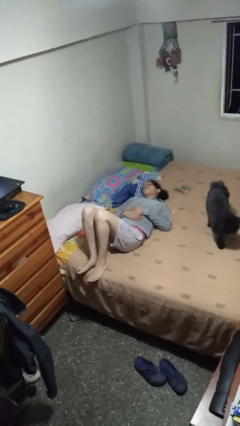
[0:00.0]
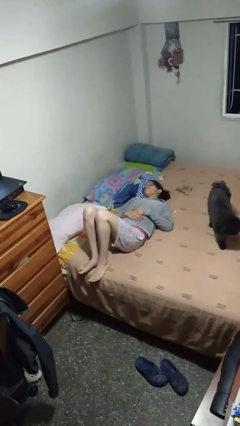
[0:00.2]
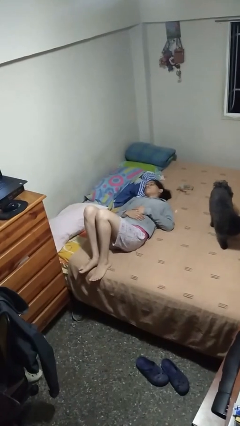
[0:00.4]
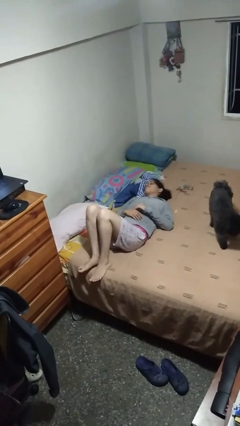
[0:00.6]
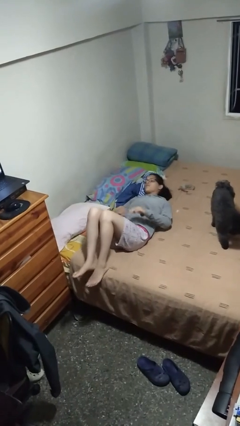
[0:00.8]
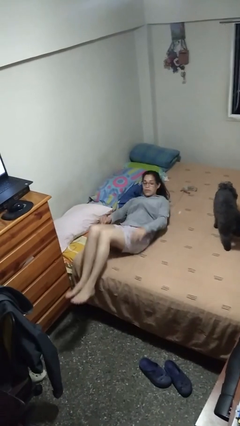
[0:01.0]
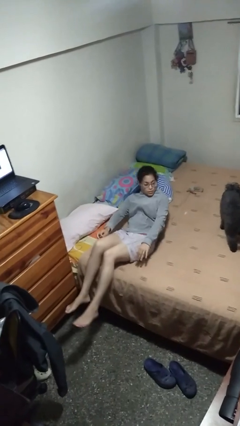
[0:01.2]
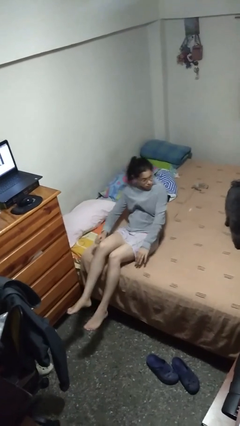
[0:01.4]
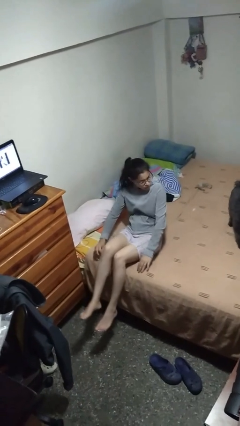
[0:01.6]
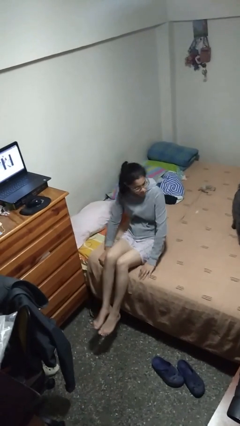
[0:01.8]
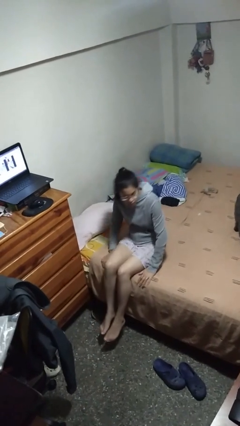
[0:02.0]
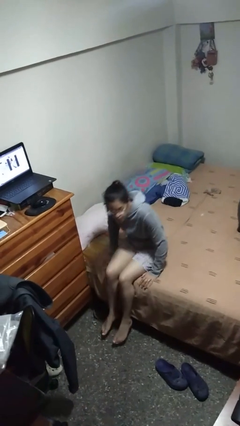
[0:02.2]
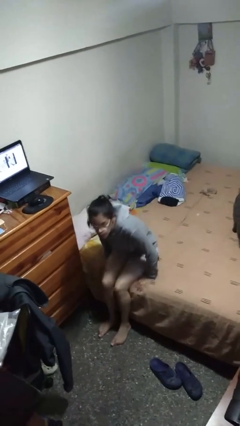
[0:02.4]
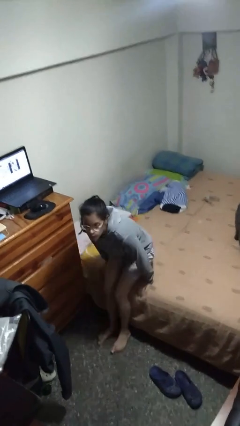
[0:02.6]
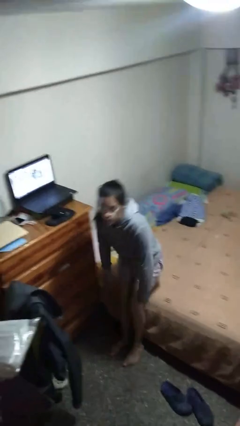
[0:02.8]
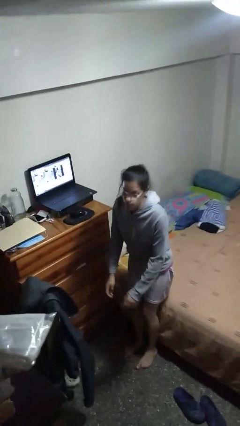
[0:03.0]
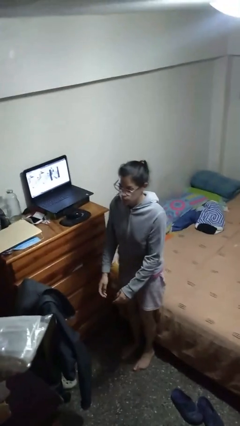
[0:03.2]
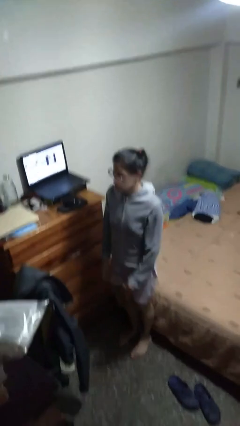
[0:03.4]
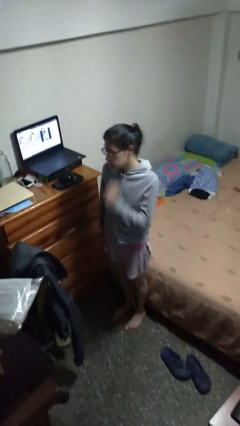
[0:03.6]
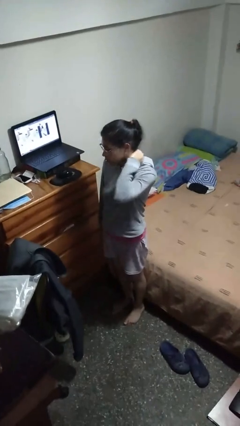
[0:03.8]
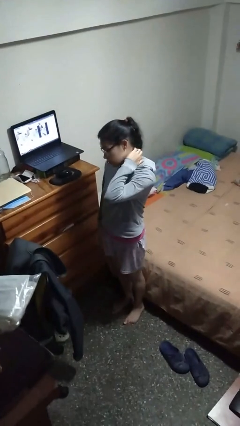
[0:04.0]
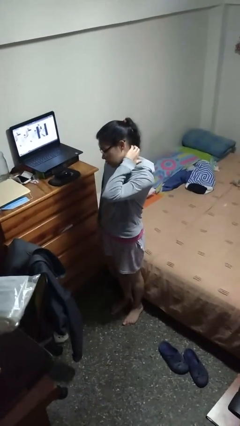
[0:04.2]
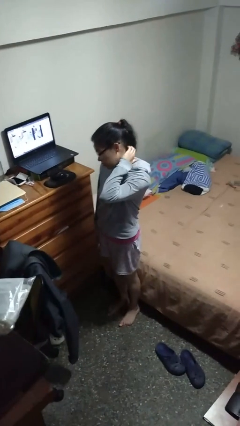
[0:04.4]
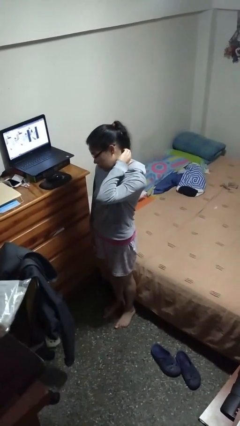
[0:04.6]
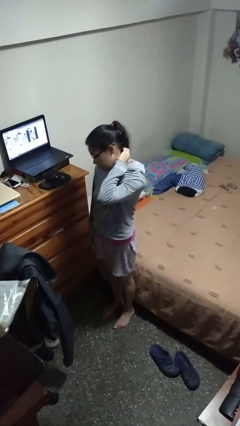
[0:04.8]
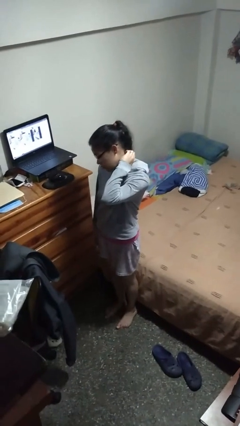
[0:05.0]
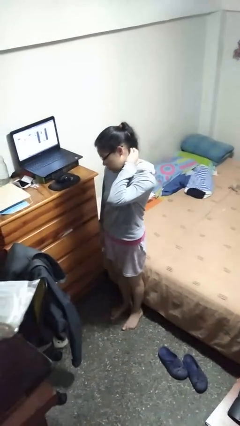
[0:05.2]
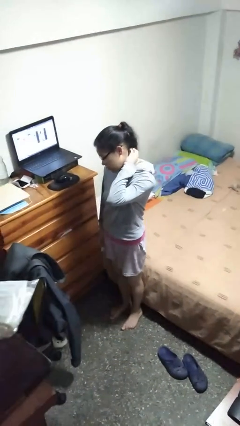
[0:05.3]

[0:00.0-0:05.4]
person stands up

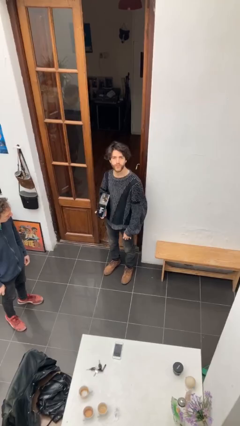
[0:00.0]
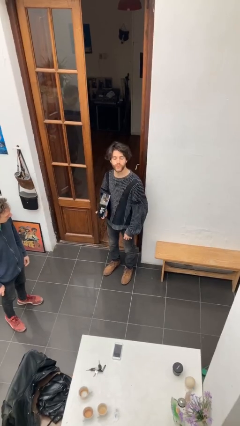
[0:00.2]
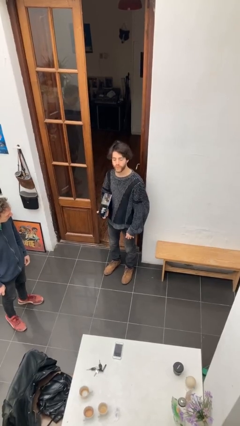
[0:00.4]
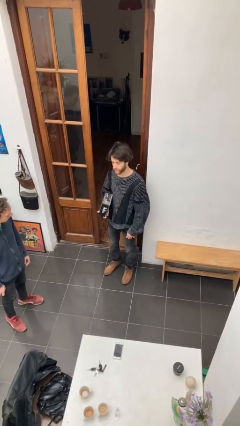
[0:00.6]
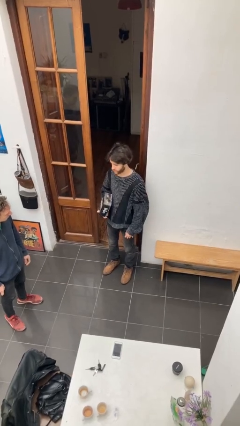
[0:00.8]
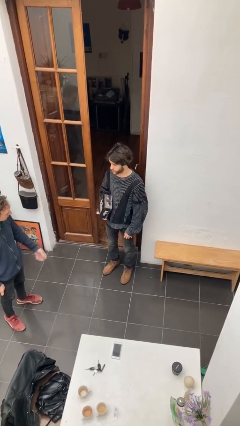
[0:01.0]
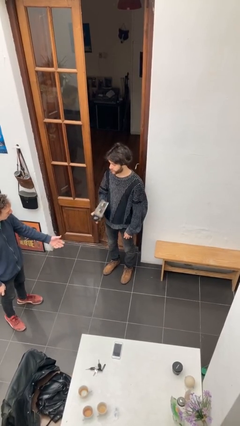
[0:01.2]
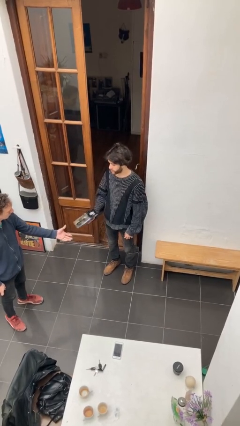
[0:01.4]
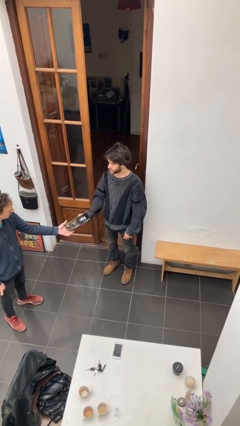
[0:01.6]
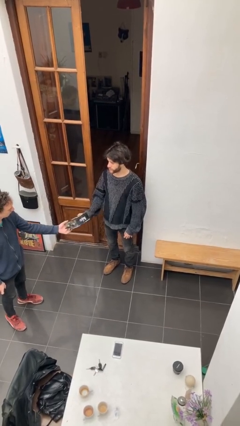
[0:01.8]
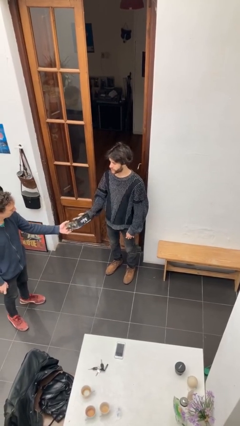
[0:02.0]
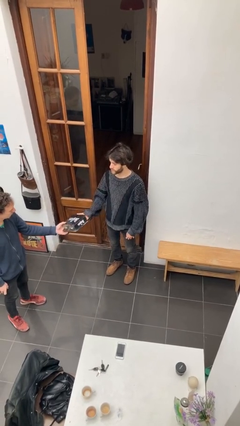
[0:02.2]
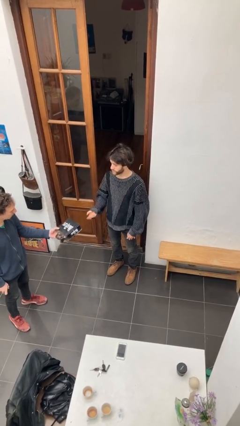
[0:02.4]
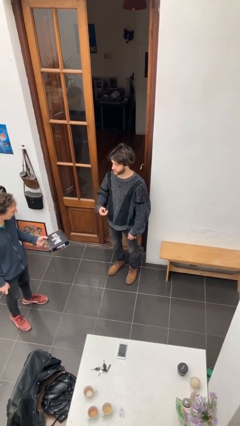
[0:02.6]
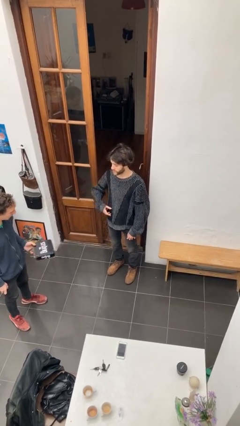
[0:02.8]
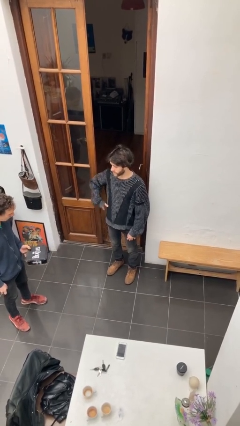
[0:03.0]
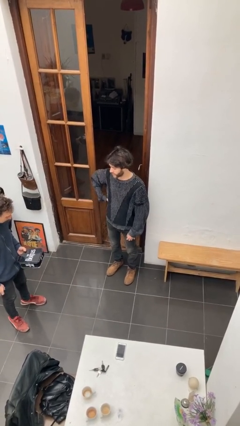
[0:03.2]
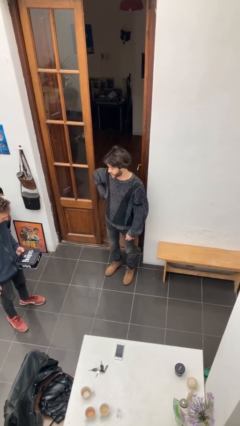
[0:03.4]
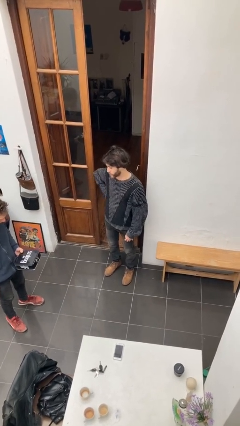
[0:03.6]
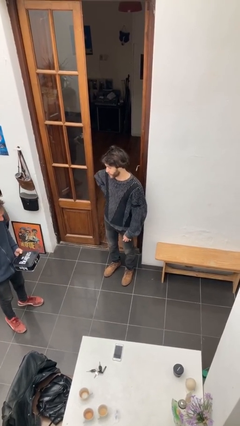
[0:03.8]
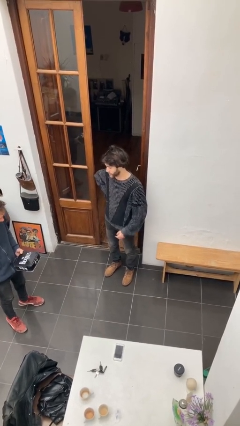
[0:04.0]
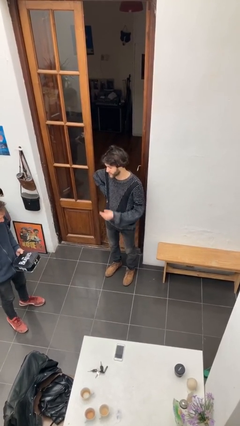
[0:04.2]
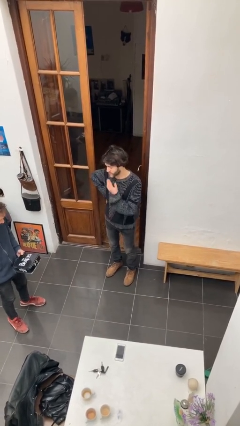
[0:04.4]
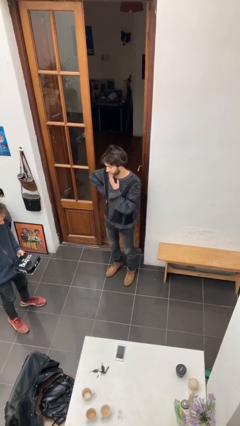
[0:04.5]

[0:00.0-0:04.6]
person transfers object to person

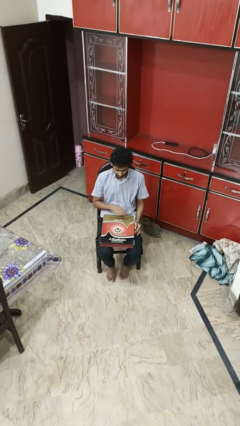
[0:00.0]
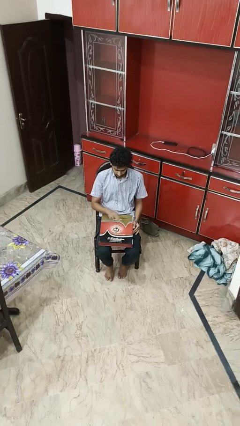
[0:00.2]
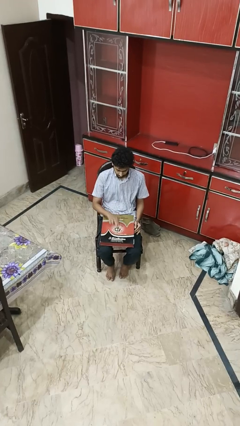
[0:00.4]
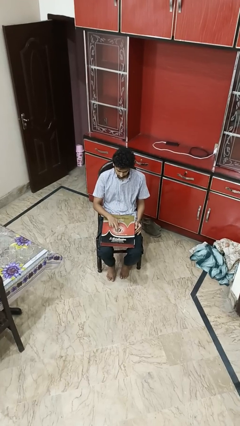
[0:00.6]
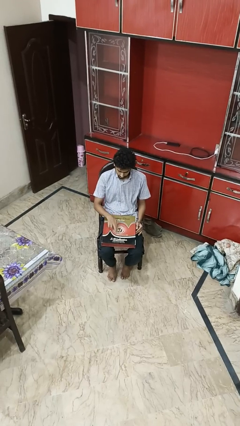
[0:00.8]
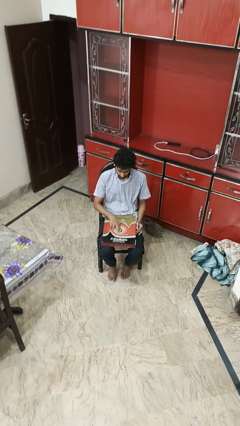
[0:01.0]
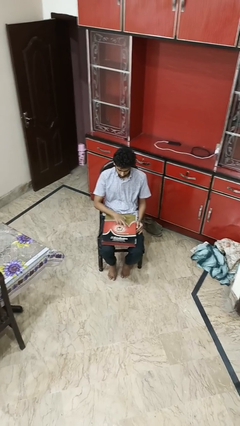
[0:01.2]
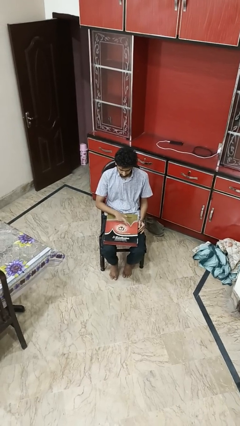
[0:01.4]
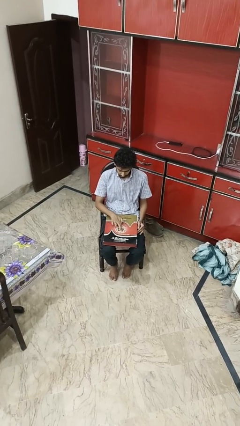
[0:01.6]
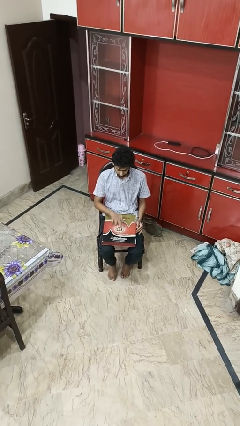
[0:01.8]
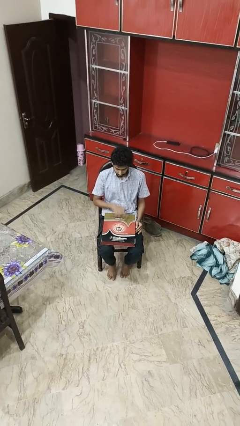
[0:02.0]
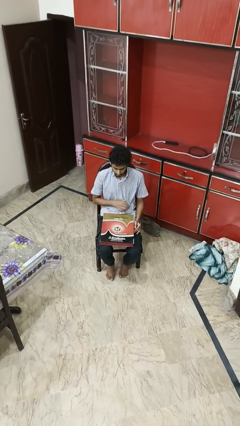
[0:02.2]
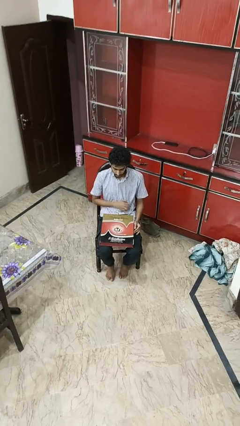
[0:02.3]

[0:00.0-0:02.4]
person taps object with finger

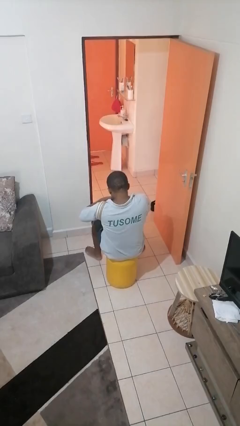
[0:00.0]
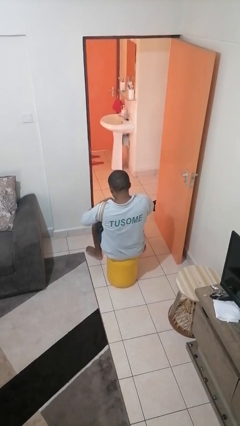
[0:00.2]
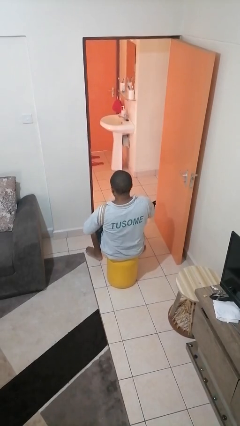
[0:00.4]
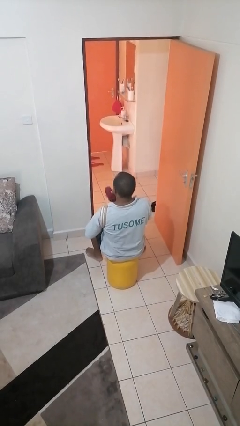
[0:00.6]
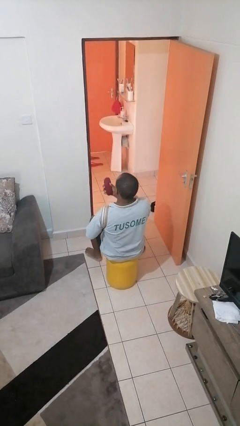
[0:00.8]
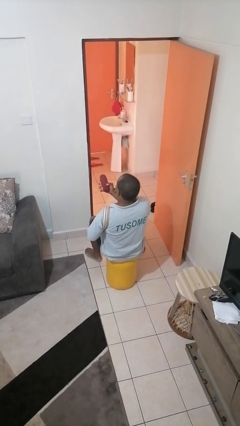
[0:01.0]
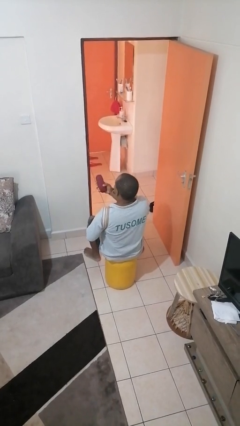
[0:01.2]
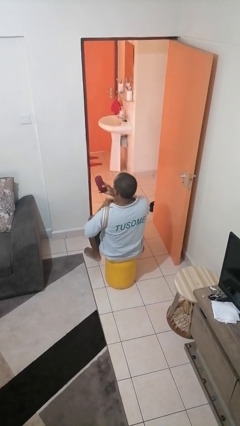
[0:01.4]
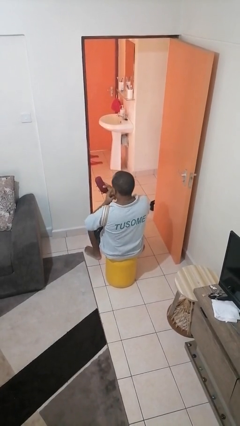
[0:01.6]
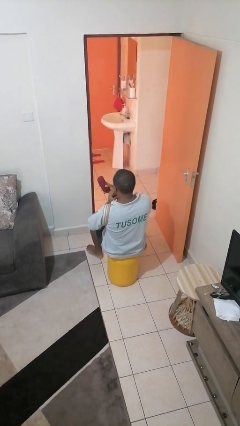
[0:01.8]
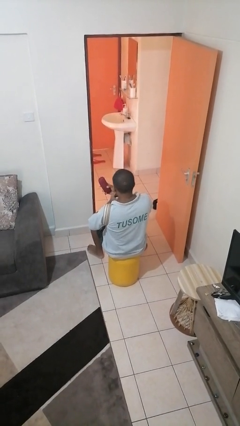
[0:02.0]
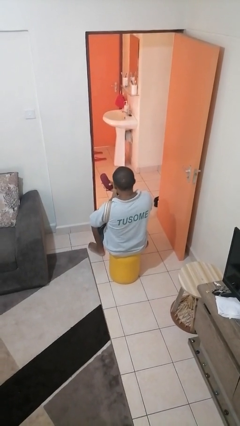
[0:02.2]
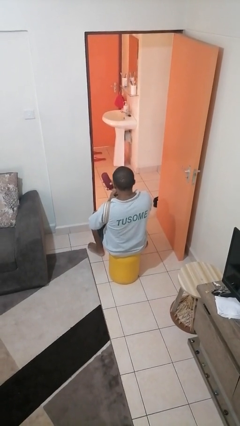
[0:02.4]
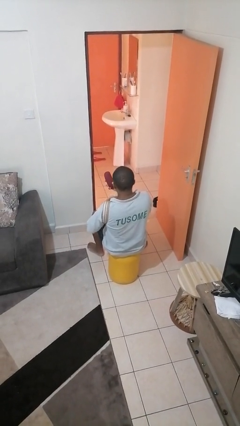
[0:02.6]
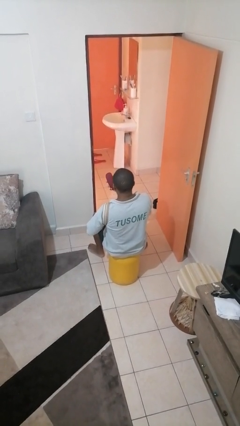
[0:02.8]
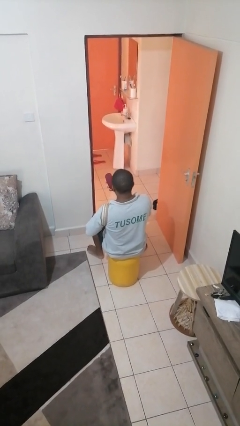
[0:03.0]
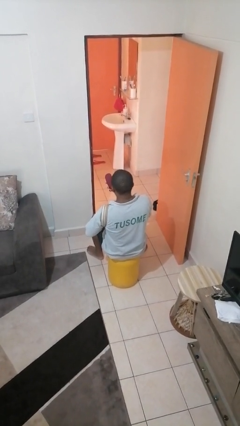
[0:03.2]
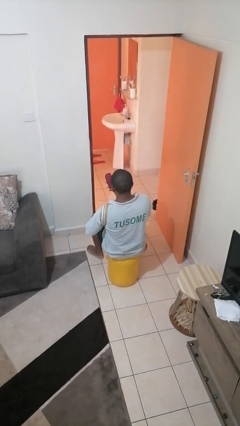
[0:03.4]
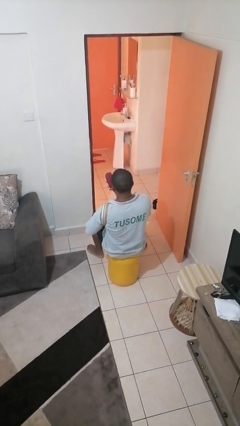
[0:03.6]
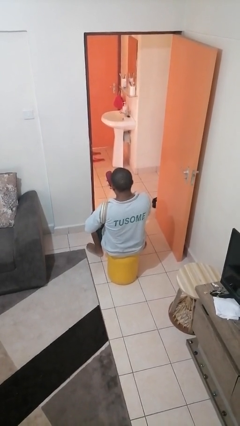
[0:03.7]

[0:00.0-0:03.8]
person takes object from purse

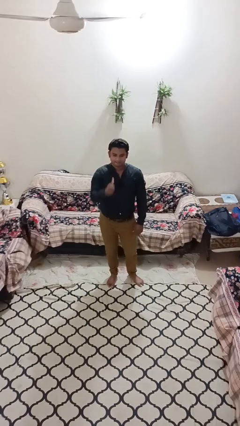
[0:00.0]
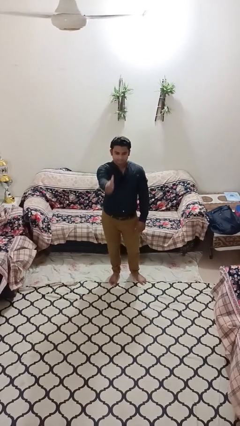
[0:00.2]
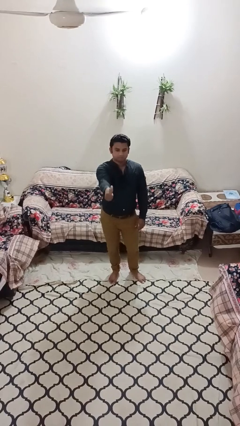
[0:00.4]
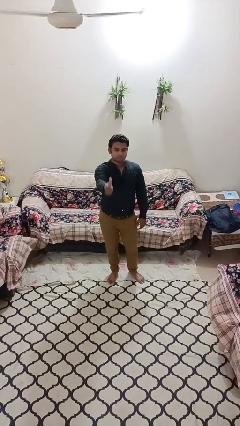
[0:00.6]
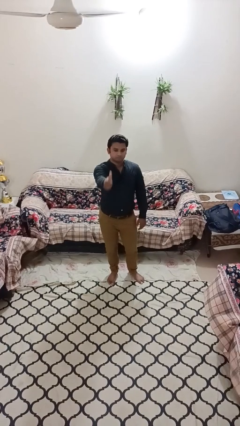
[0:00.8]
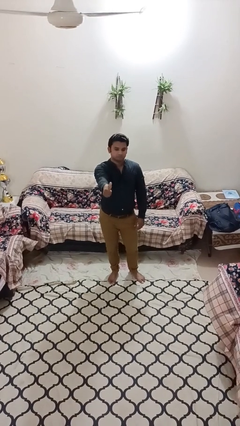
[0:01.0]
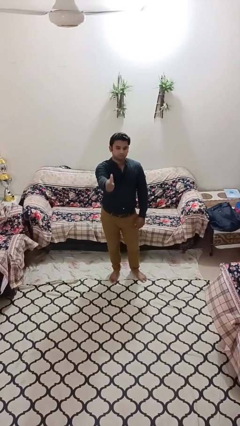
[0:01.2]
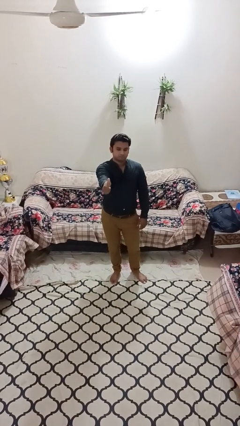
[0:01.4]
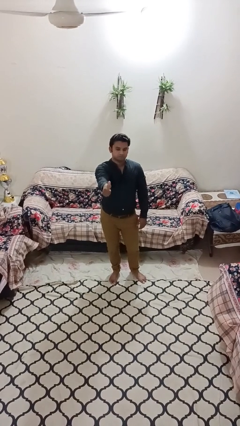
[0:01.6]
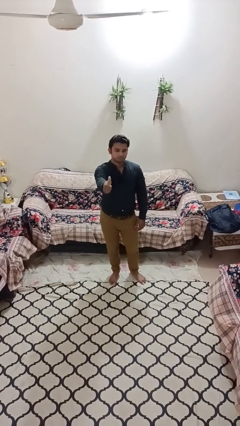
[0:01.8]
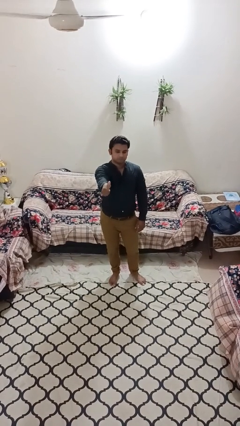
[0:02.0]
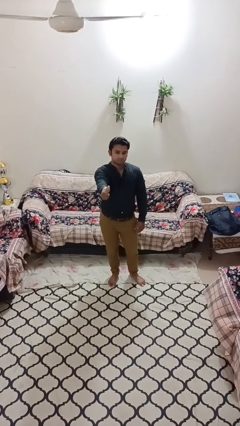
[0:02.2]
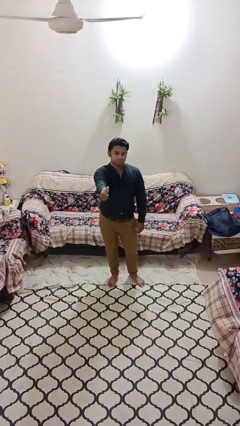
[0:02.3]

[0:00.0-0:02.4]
person gestures thumbs up
